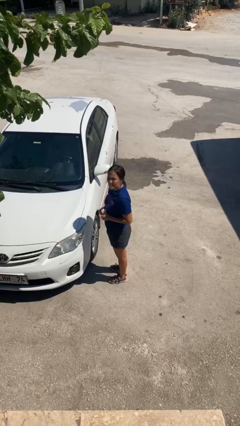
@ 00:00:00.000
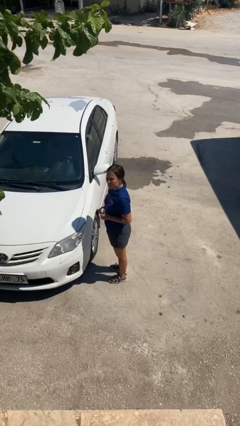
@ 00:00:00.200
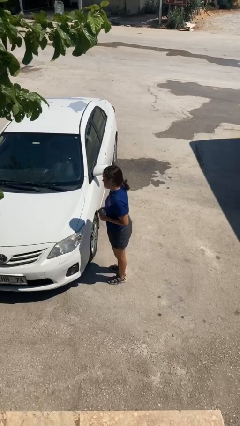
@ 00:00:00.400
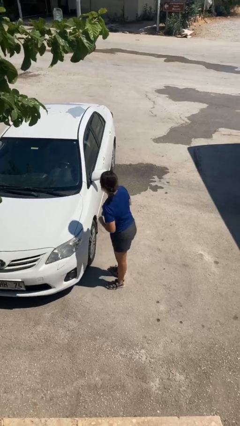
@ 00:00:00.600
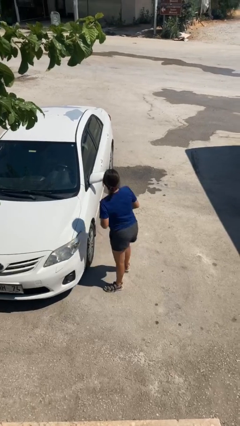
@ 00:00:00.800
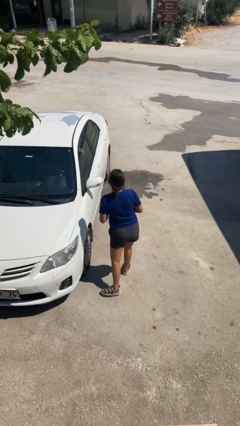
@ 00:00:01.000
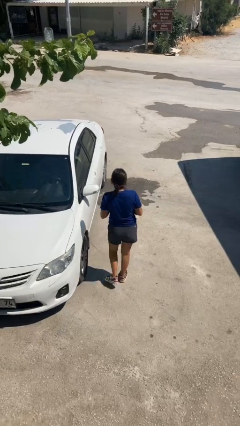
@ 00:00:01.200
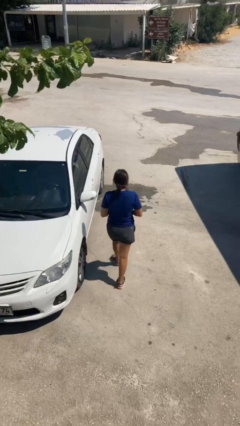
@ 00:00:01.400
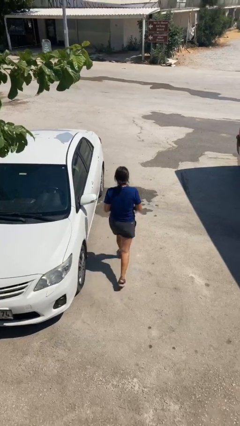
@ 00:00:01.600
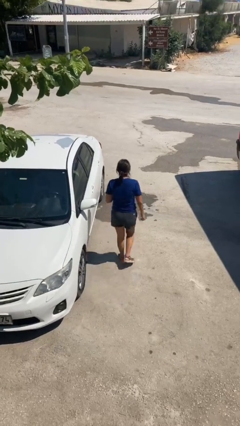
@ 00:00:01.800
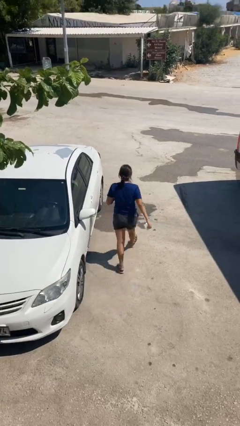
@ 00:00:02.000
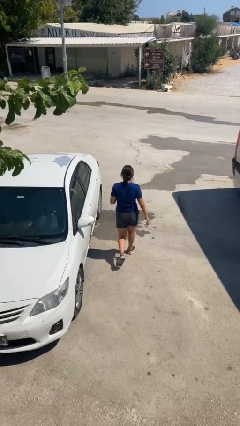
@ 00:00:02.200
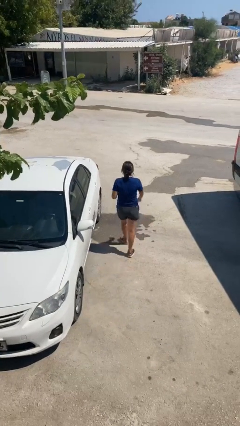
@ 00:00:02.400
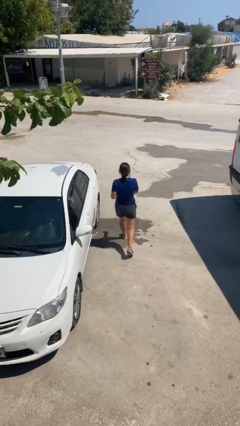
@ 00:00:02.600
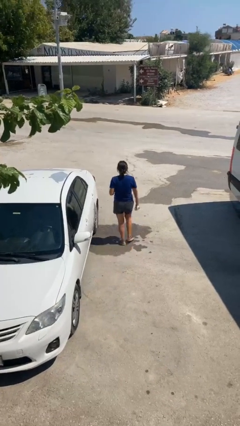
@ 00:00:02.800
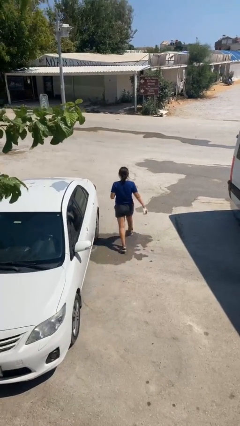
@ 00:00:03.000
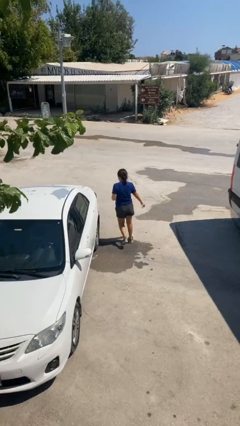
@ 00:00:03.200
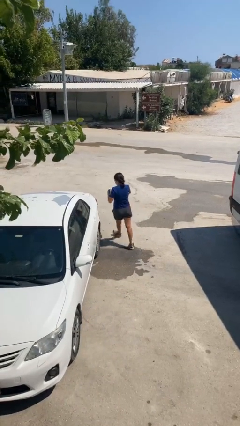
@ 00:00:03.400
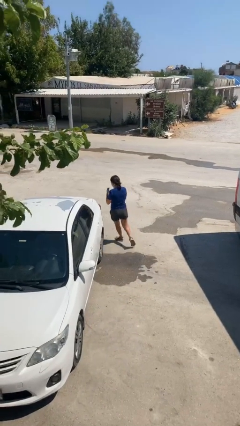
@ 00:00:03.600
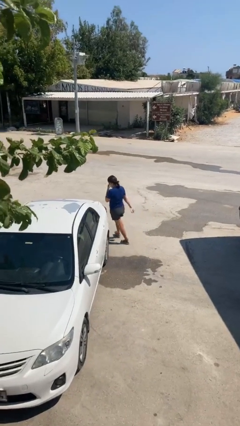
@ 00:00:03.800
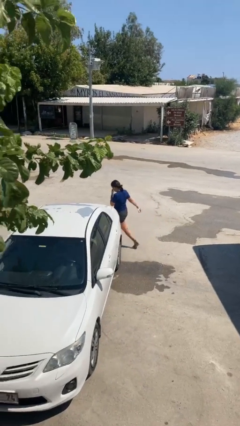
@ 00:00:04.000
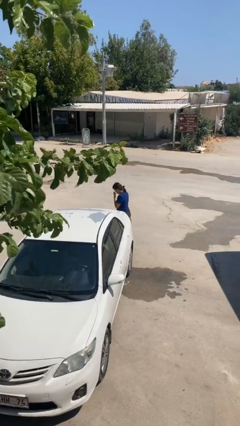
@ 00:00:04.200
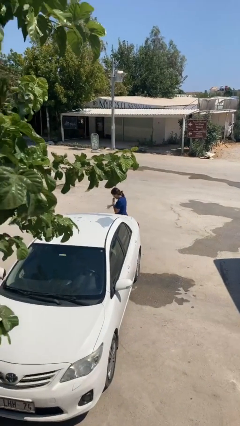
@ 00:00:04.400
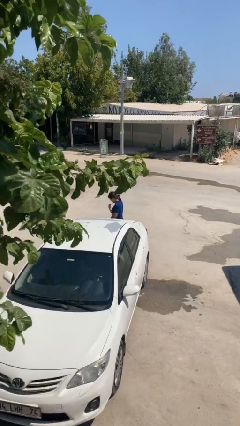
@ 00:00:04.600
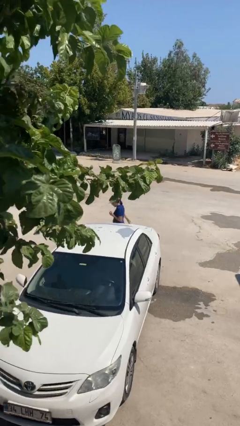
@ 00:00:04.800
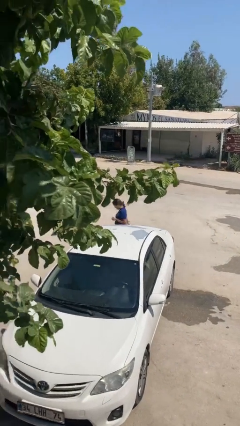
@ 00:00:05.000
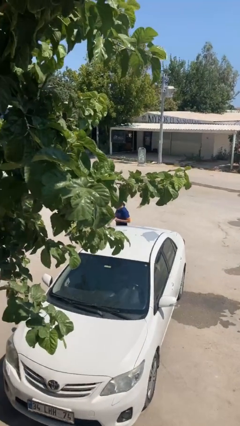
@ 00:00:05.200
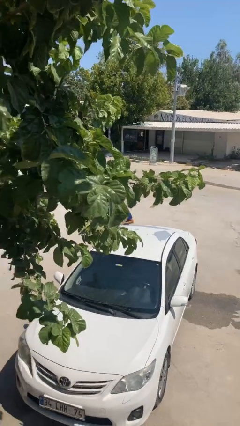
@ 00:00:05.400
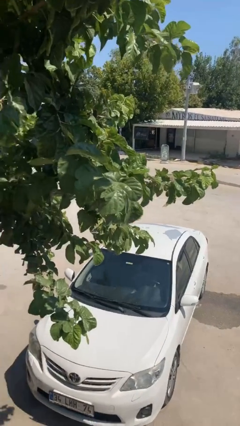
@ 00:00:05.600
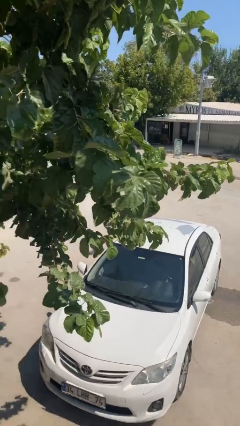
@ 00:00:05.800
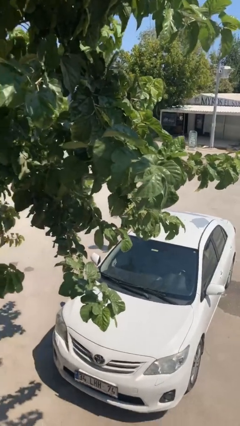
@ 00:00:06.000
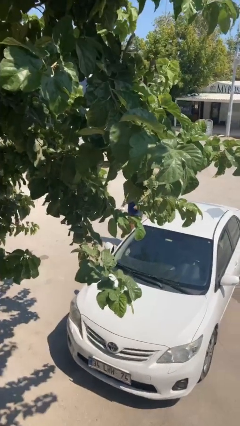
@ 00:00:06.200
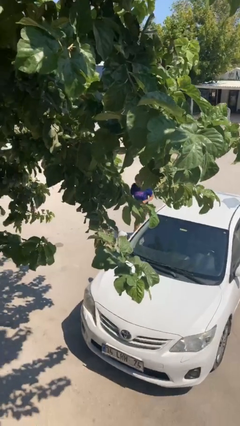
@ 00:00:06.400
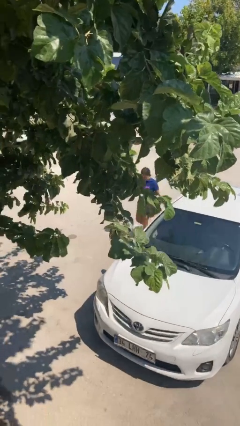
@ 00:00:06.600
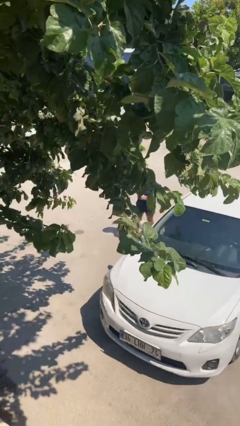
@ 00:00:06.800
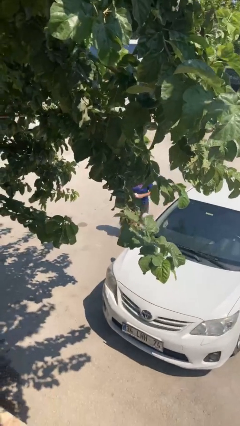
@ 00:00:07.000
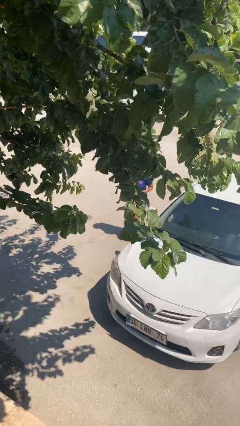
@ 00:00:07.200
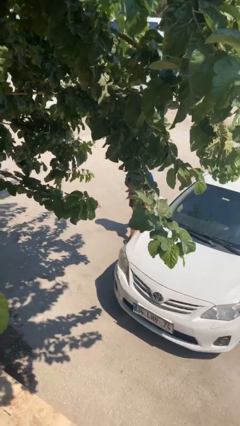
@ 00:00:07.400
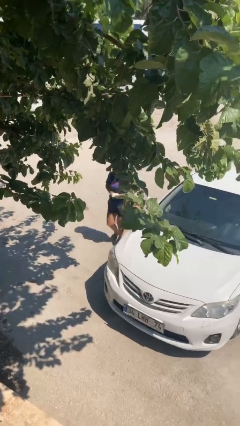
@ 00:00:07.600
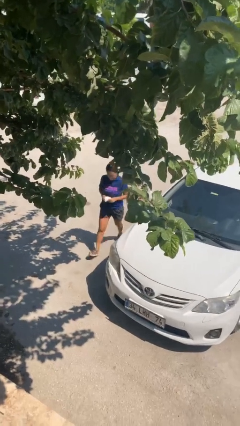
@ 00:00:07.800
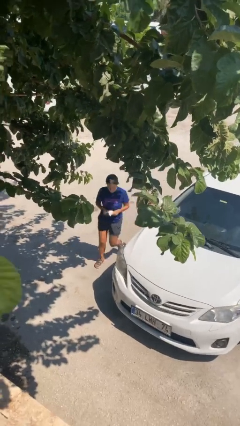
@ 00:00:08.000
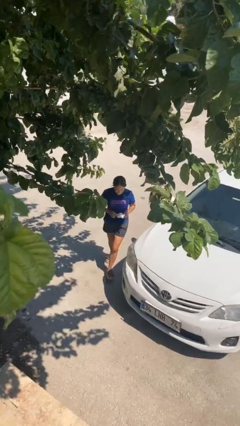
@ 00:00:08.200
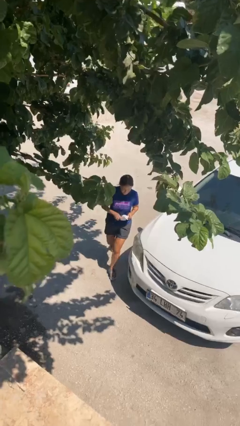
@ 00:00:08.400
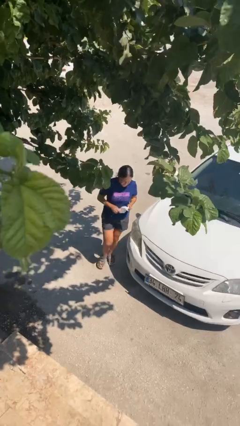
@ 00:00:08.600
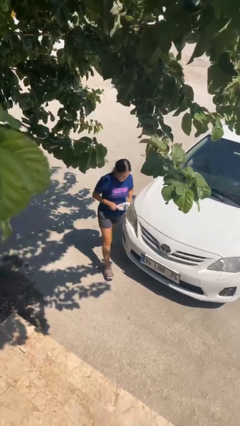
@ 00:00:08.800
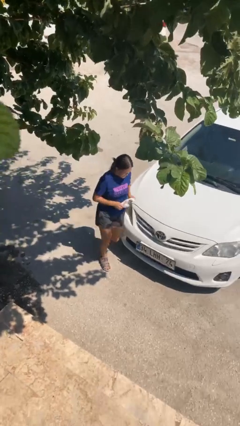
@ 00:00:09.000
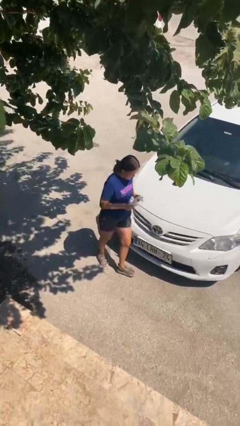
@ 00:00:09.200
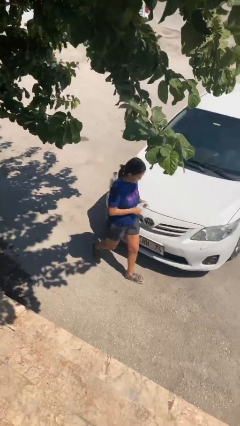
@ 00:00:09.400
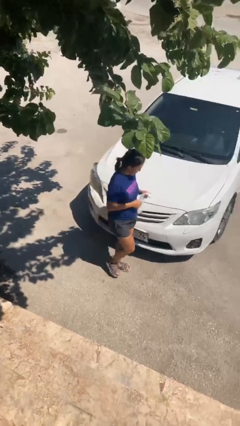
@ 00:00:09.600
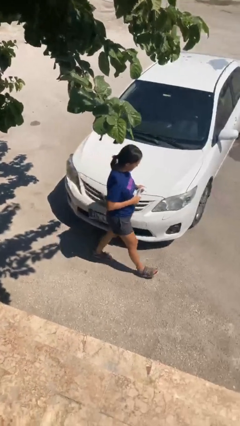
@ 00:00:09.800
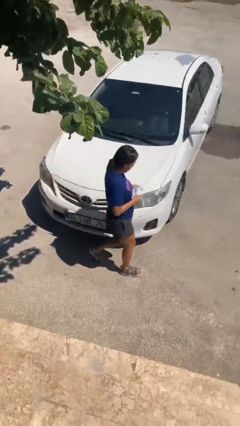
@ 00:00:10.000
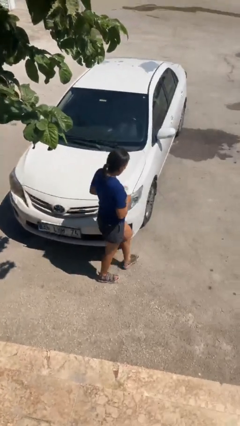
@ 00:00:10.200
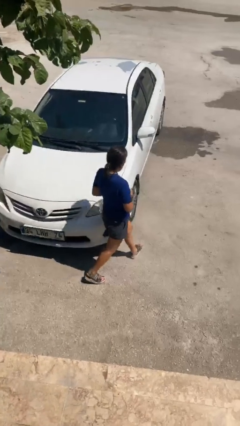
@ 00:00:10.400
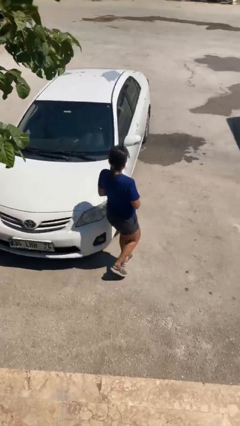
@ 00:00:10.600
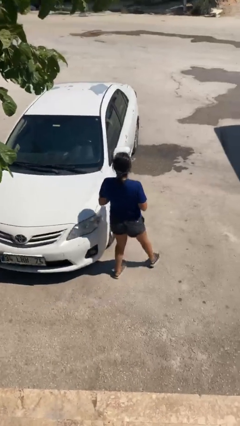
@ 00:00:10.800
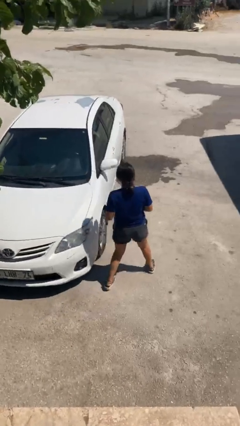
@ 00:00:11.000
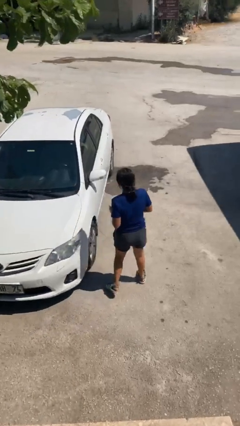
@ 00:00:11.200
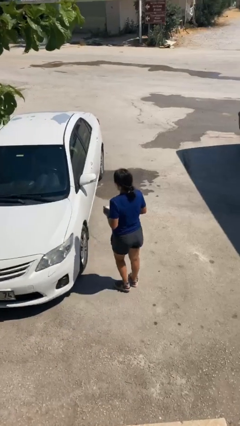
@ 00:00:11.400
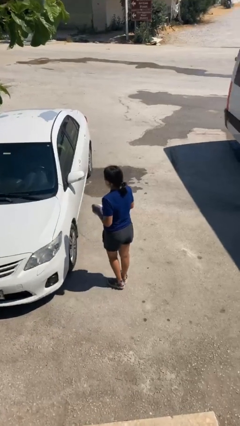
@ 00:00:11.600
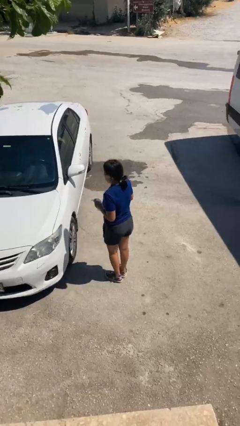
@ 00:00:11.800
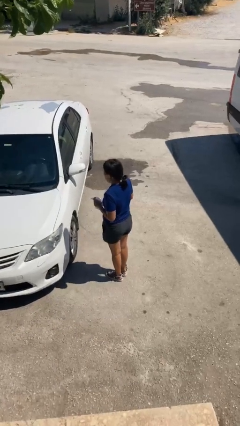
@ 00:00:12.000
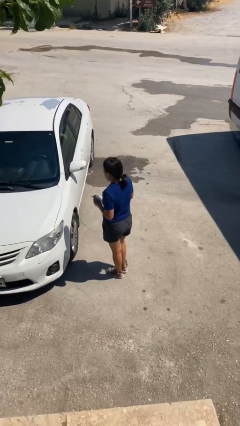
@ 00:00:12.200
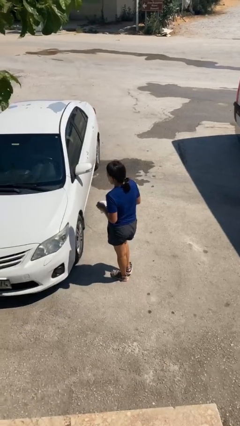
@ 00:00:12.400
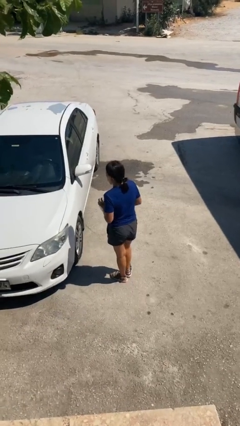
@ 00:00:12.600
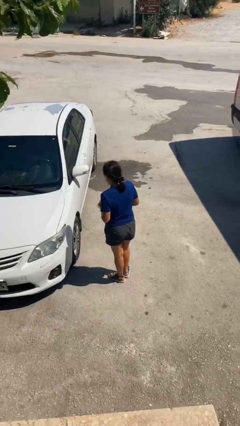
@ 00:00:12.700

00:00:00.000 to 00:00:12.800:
person walks around car

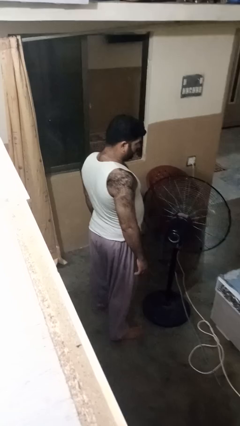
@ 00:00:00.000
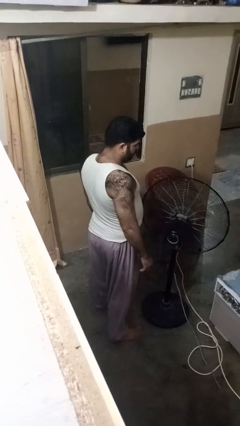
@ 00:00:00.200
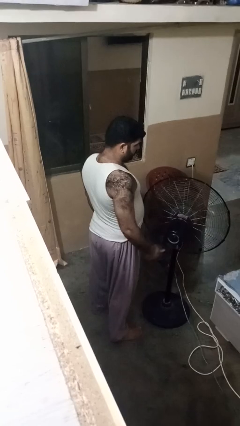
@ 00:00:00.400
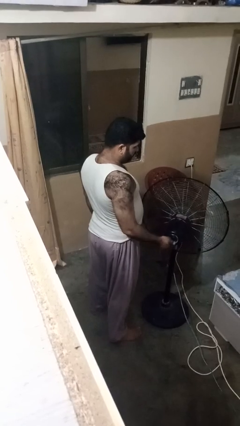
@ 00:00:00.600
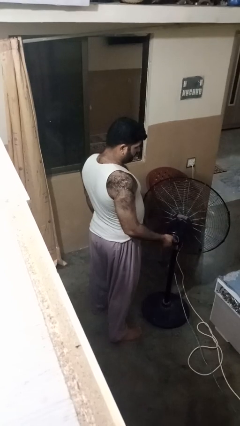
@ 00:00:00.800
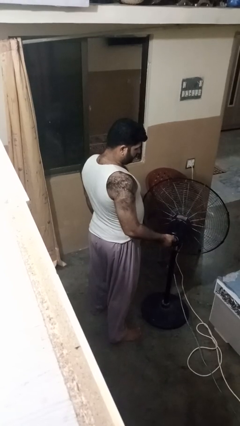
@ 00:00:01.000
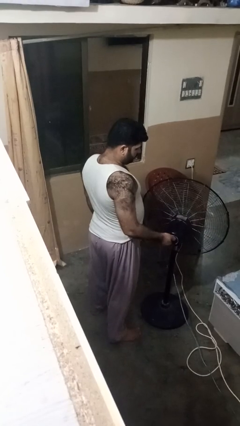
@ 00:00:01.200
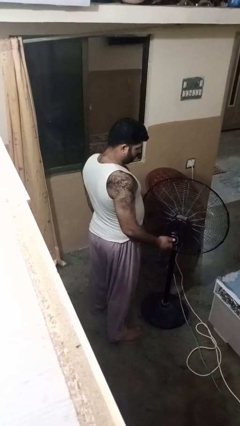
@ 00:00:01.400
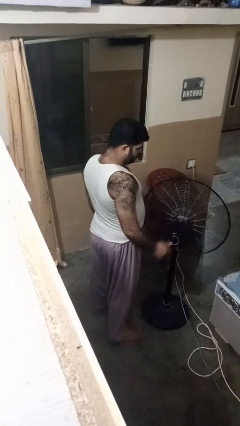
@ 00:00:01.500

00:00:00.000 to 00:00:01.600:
person turns off fan

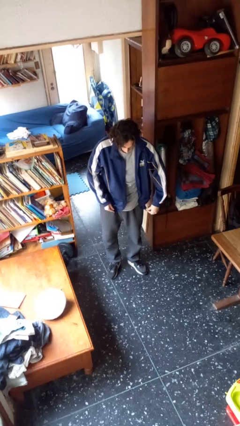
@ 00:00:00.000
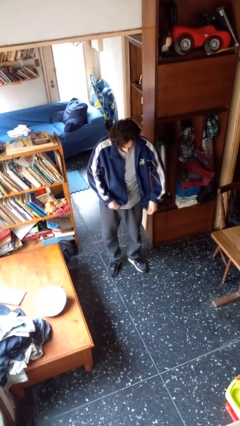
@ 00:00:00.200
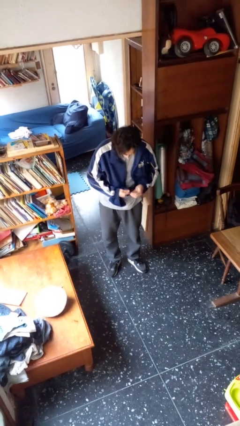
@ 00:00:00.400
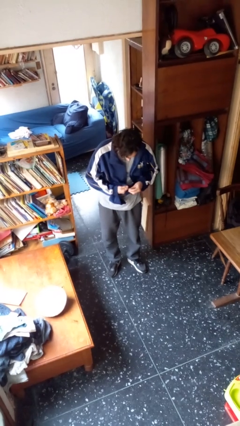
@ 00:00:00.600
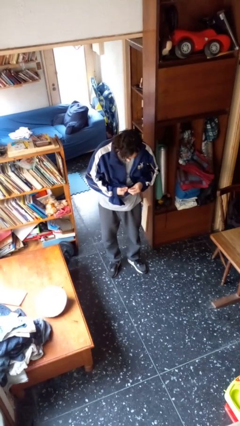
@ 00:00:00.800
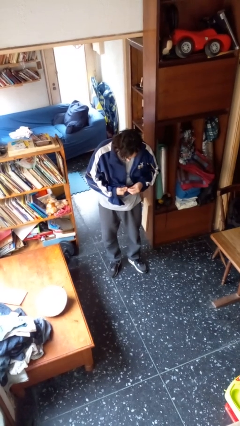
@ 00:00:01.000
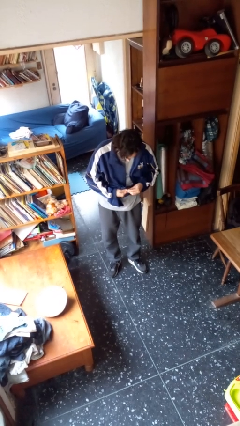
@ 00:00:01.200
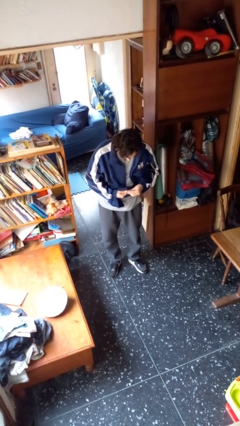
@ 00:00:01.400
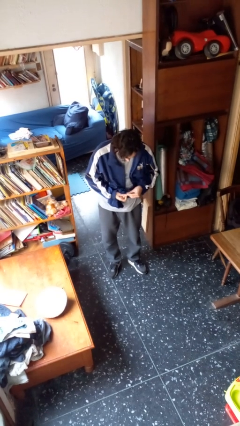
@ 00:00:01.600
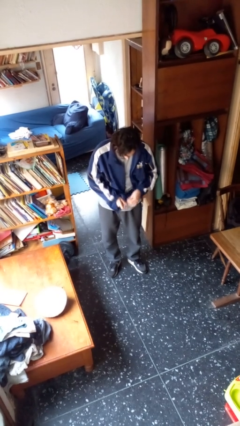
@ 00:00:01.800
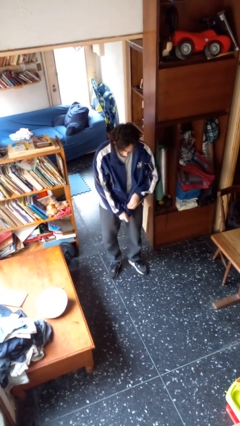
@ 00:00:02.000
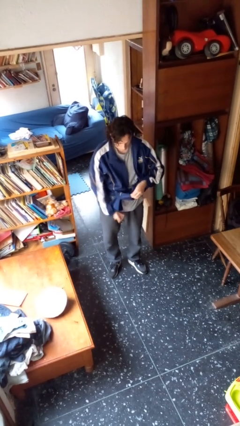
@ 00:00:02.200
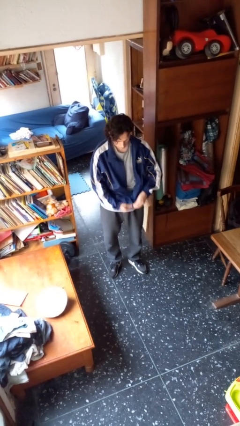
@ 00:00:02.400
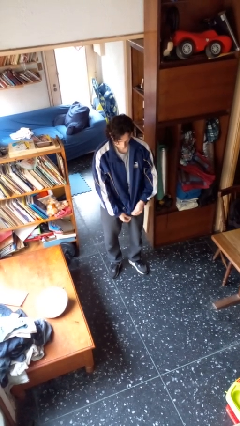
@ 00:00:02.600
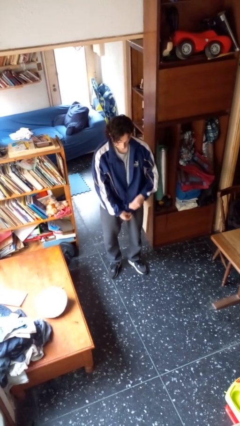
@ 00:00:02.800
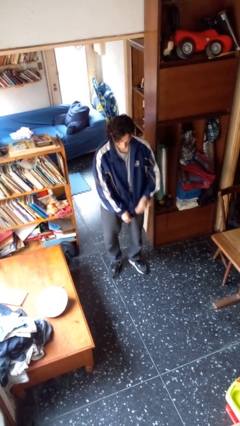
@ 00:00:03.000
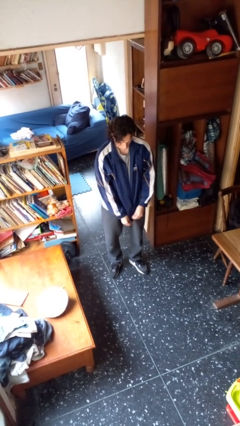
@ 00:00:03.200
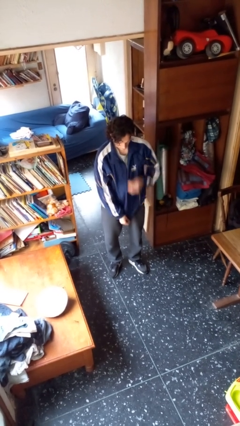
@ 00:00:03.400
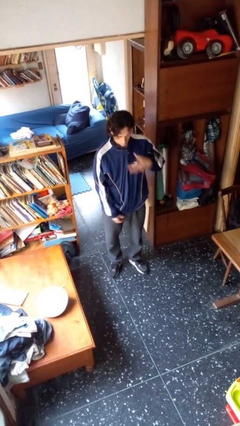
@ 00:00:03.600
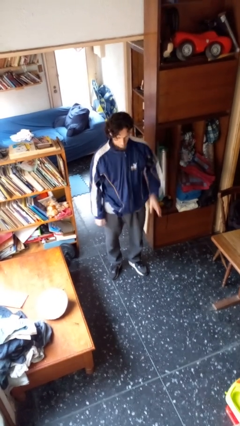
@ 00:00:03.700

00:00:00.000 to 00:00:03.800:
person zips up jacket
